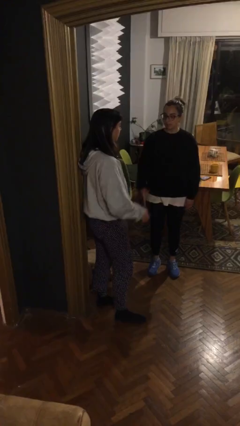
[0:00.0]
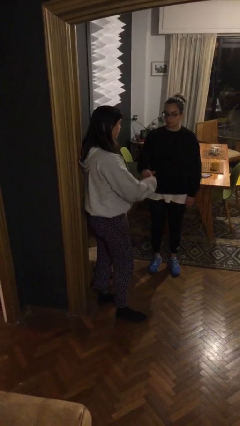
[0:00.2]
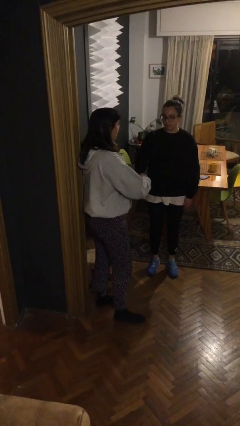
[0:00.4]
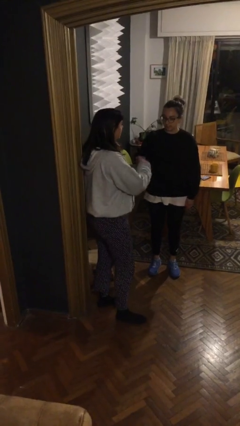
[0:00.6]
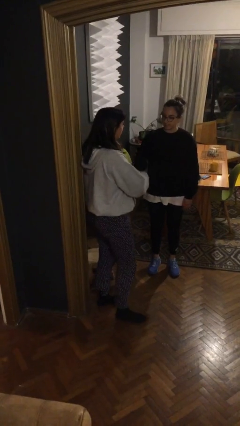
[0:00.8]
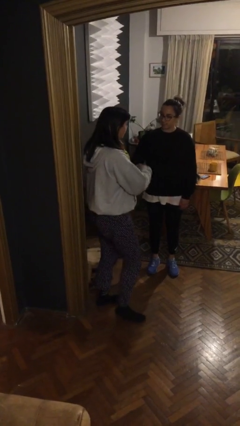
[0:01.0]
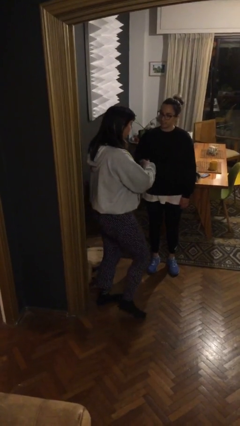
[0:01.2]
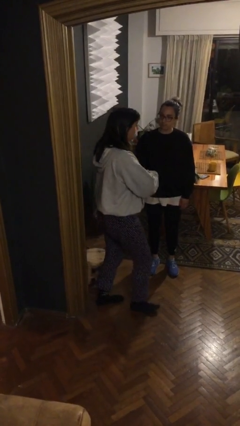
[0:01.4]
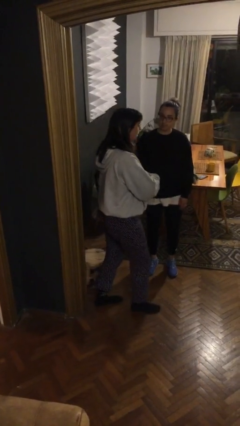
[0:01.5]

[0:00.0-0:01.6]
person shakes hand

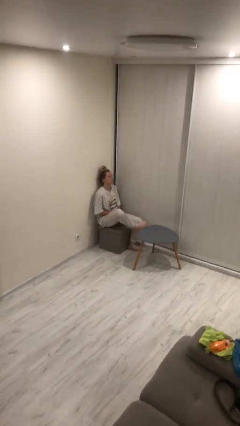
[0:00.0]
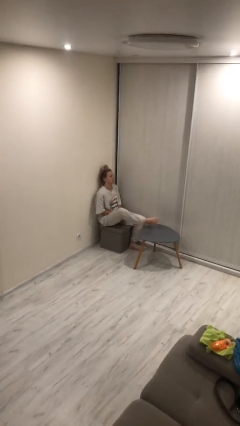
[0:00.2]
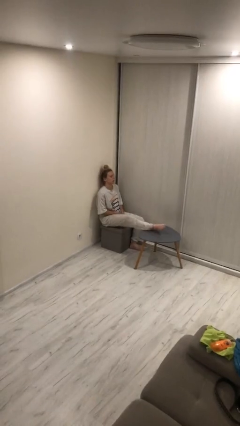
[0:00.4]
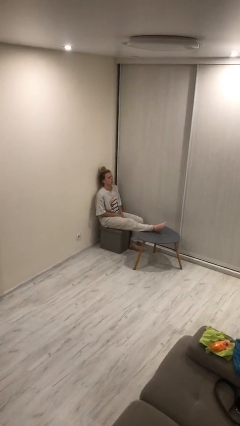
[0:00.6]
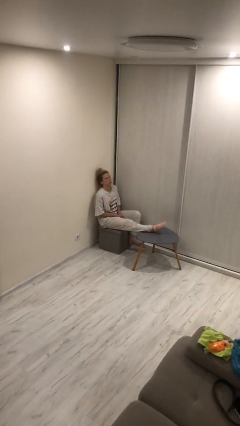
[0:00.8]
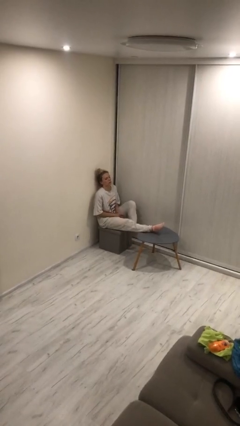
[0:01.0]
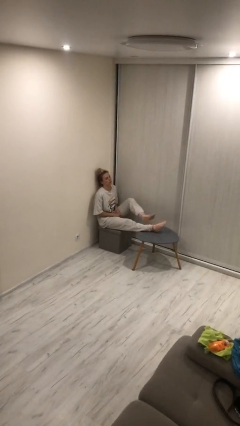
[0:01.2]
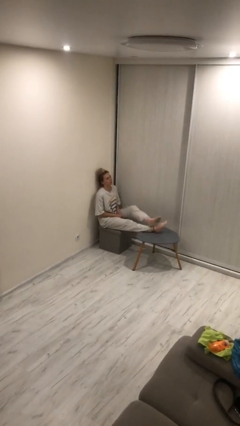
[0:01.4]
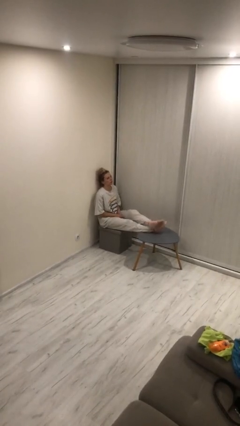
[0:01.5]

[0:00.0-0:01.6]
person puts feet up

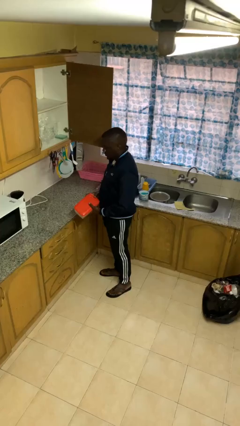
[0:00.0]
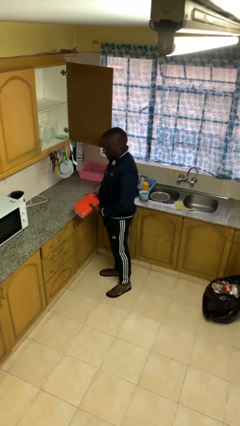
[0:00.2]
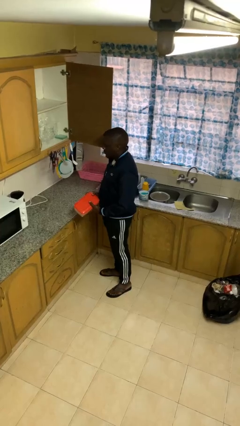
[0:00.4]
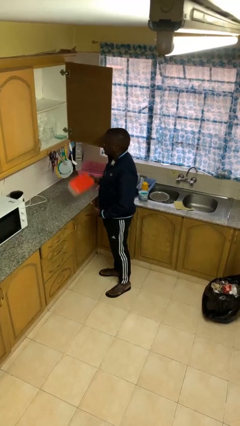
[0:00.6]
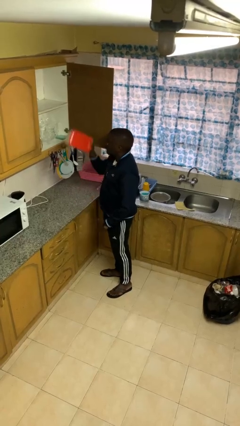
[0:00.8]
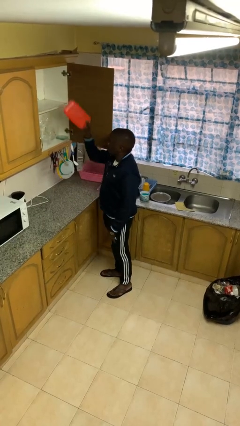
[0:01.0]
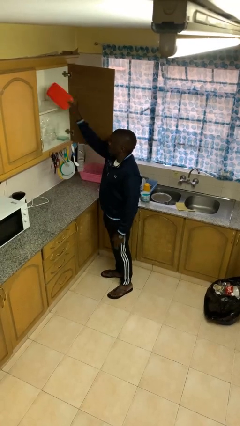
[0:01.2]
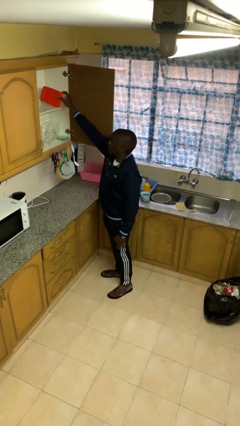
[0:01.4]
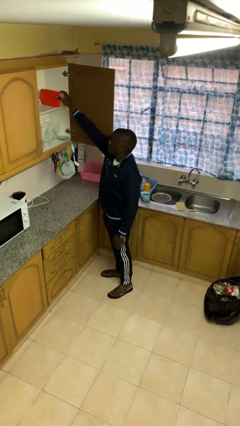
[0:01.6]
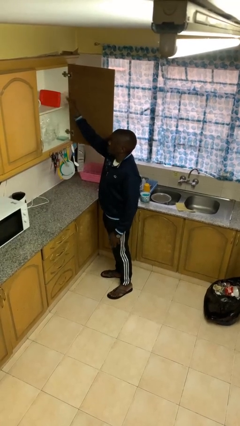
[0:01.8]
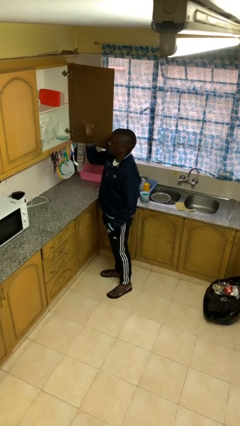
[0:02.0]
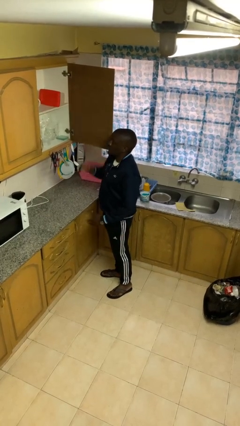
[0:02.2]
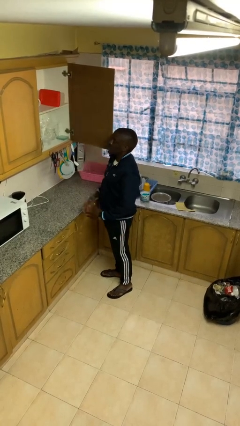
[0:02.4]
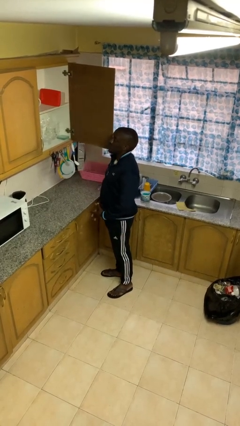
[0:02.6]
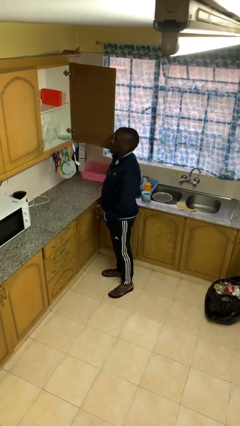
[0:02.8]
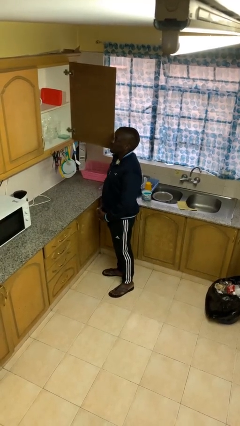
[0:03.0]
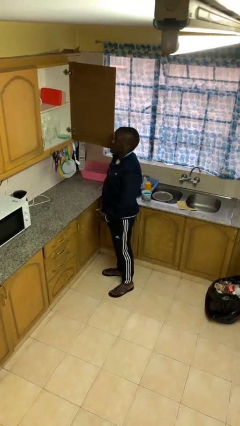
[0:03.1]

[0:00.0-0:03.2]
person puts down object on shelf

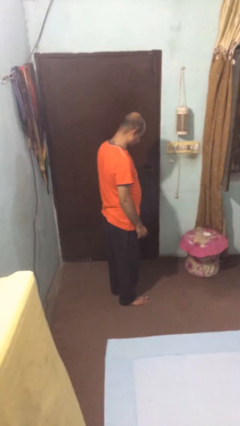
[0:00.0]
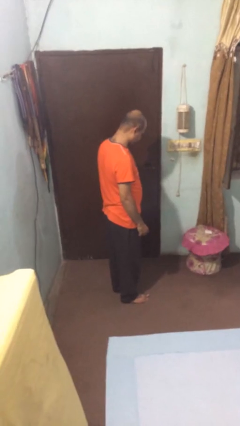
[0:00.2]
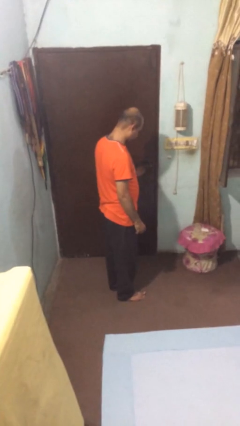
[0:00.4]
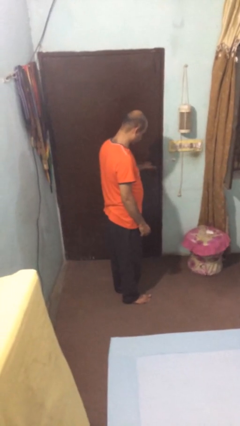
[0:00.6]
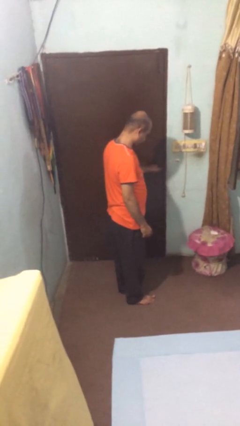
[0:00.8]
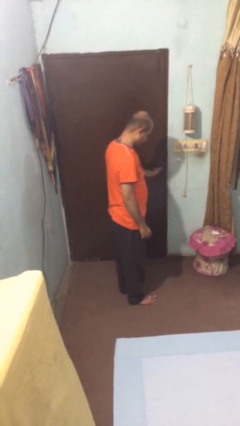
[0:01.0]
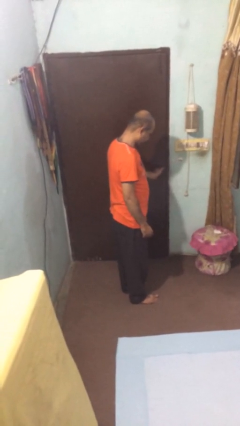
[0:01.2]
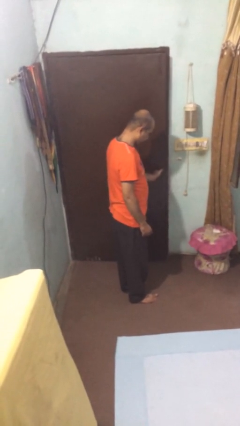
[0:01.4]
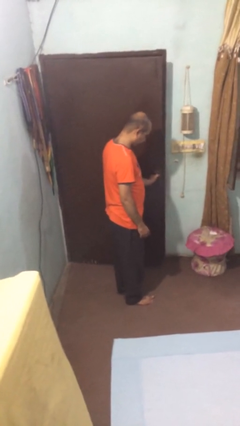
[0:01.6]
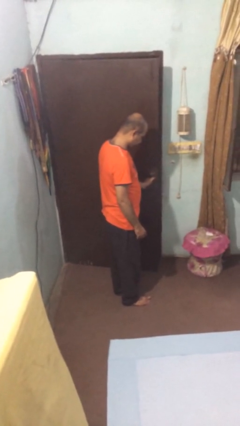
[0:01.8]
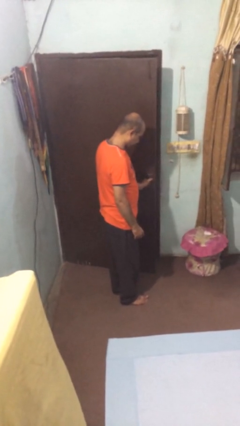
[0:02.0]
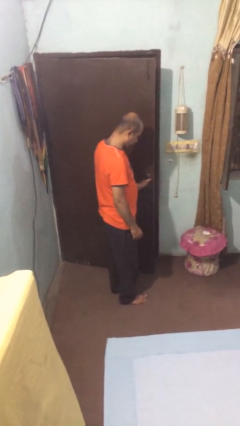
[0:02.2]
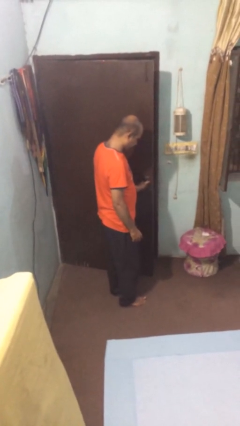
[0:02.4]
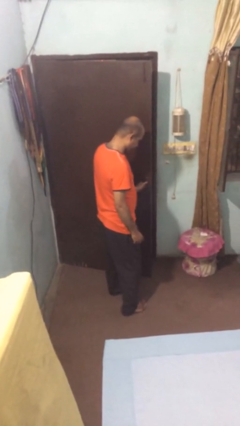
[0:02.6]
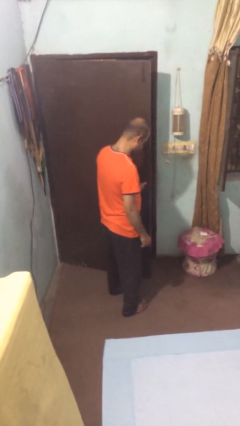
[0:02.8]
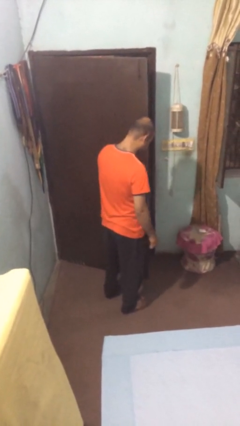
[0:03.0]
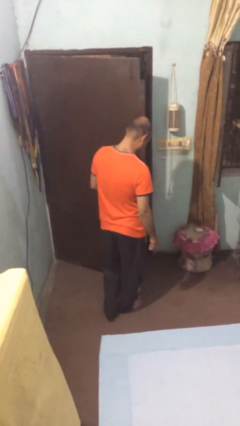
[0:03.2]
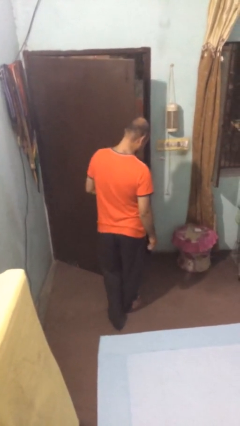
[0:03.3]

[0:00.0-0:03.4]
person opens facility door

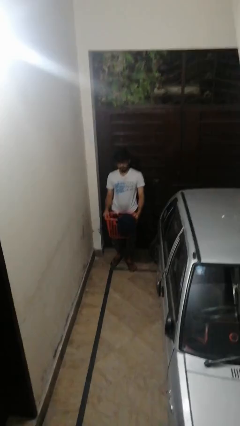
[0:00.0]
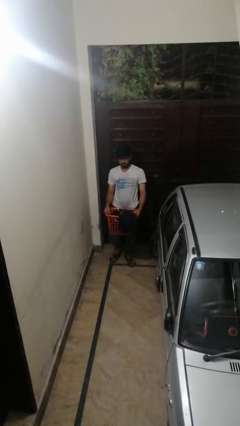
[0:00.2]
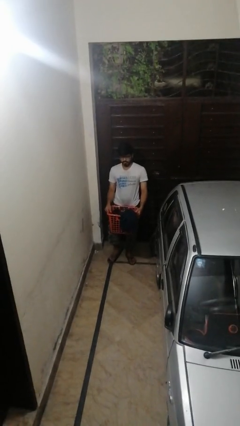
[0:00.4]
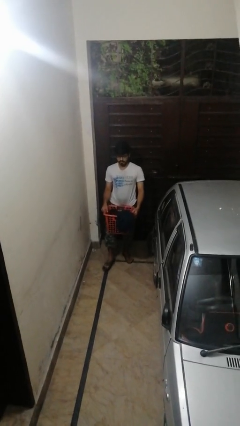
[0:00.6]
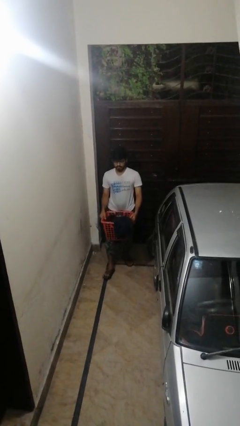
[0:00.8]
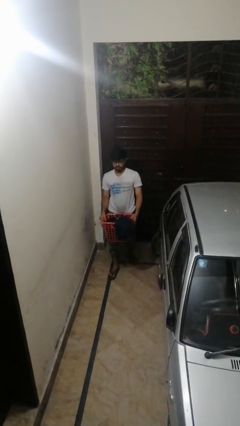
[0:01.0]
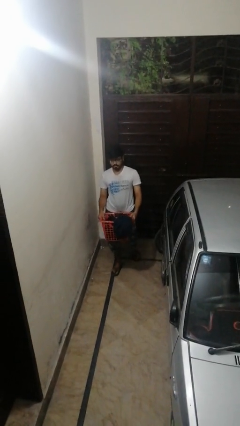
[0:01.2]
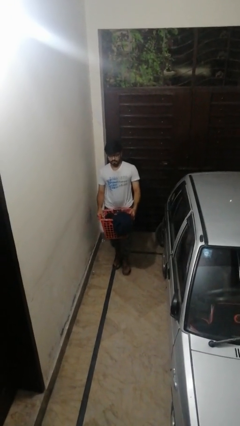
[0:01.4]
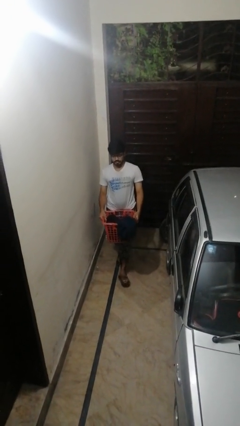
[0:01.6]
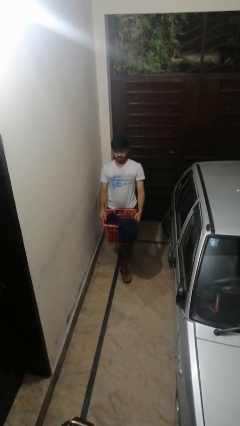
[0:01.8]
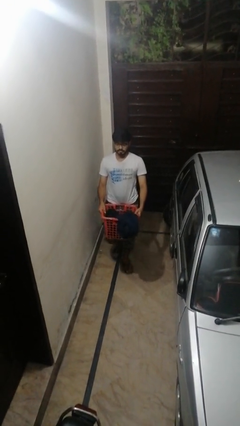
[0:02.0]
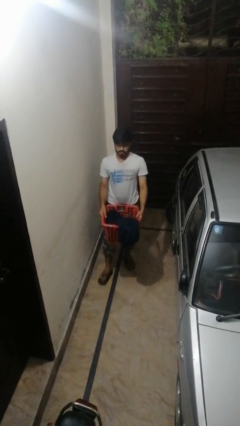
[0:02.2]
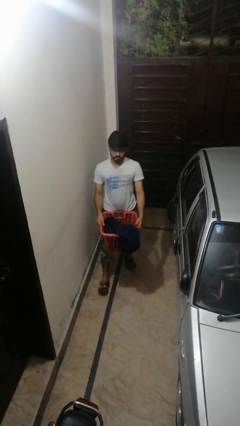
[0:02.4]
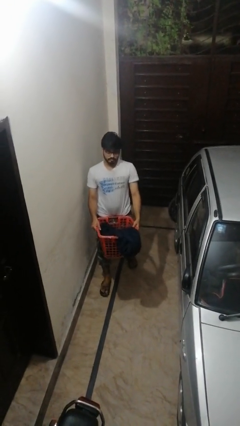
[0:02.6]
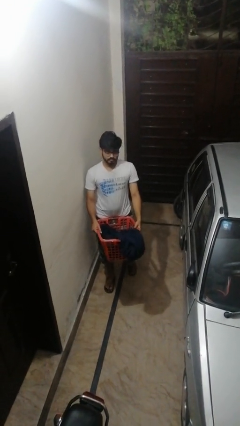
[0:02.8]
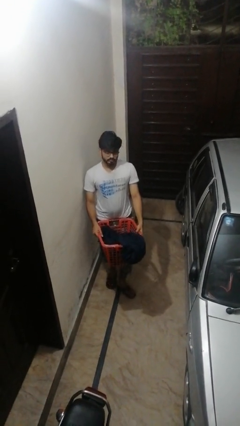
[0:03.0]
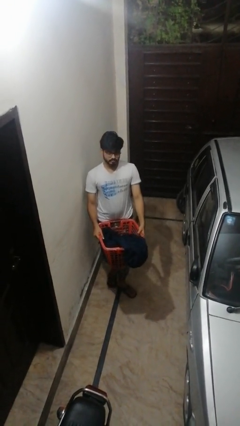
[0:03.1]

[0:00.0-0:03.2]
person carries laundry basket

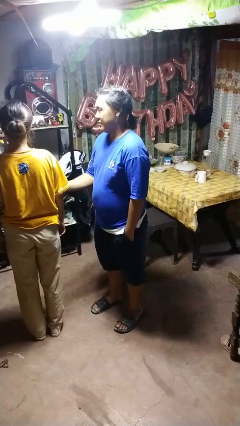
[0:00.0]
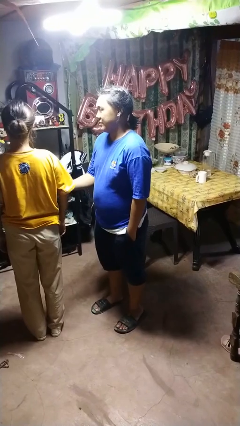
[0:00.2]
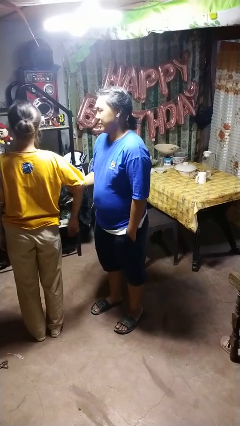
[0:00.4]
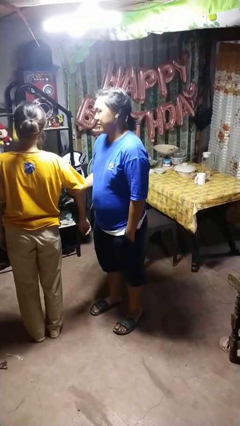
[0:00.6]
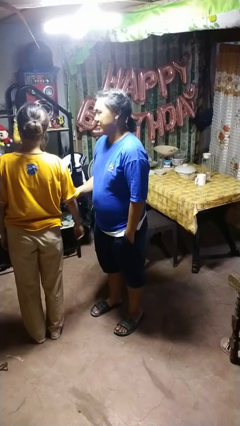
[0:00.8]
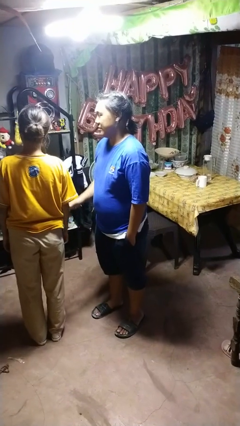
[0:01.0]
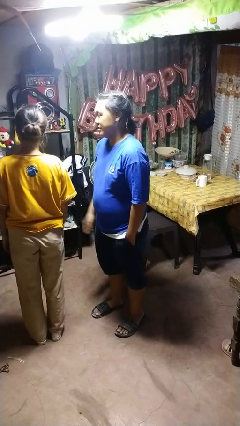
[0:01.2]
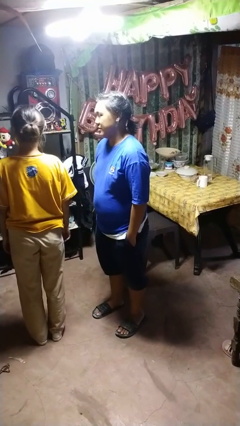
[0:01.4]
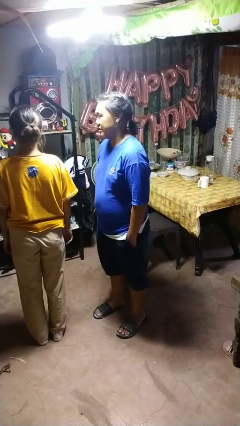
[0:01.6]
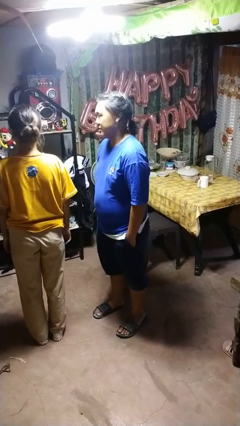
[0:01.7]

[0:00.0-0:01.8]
person grabs person by bicep

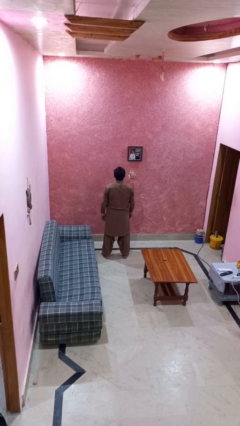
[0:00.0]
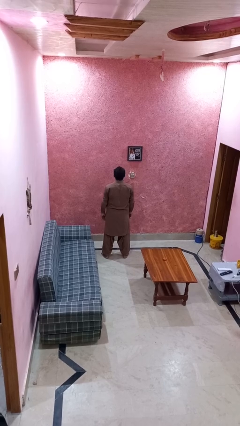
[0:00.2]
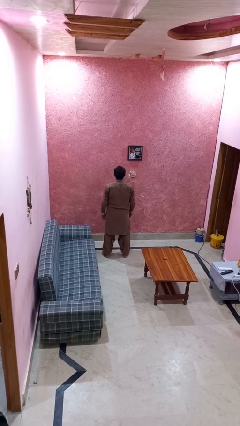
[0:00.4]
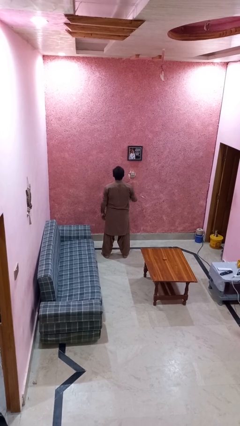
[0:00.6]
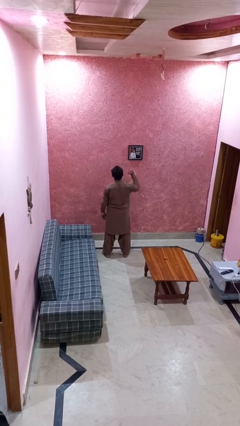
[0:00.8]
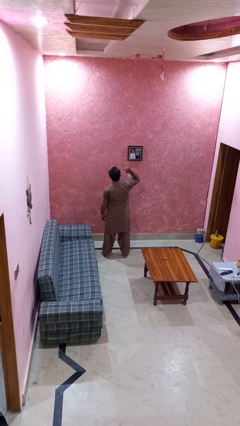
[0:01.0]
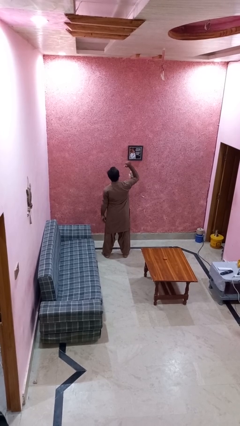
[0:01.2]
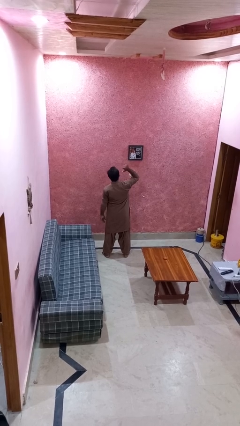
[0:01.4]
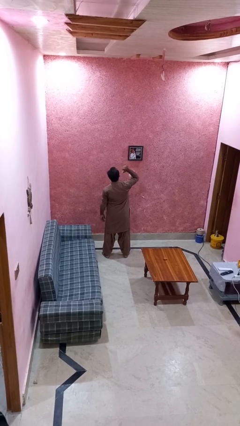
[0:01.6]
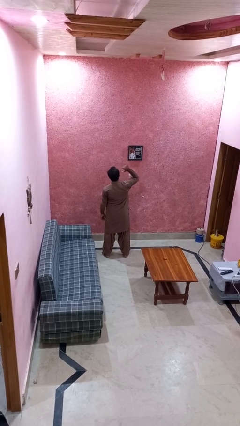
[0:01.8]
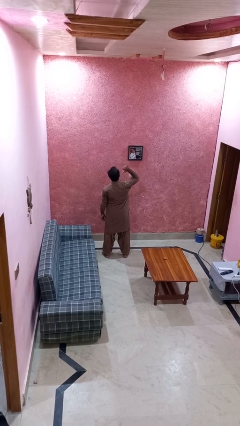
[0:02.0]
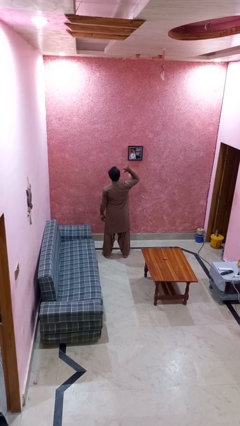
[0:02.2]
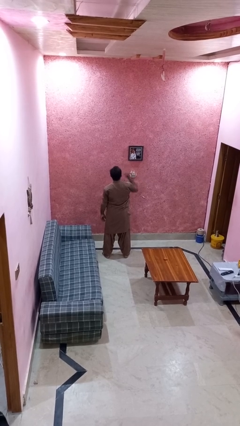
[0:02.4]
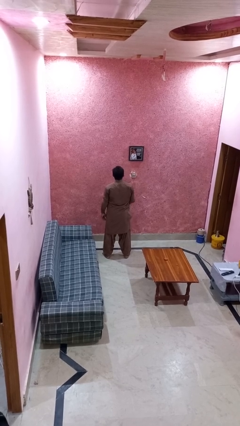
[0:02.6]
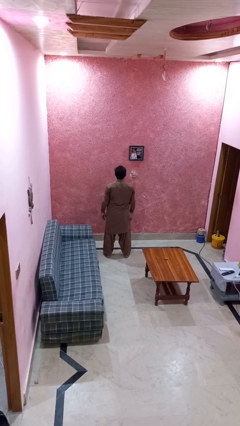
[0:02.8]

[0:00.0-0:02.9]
person gestures behind me
